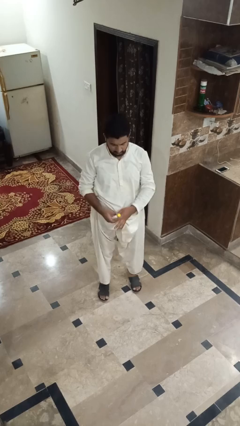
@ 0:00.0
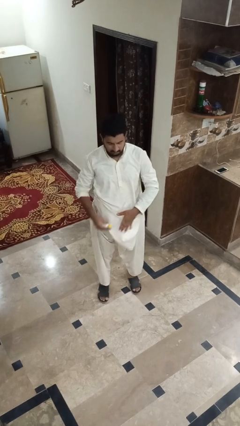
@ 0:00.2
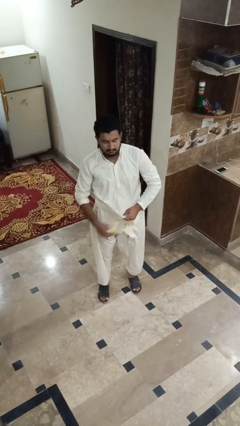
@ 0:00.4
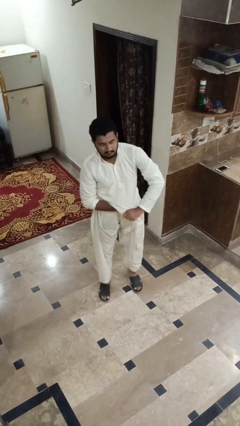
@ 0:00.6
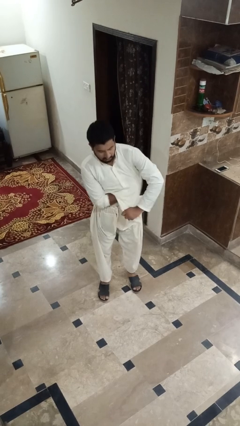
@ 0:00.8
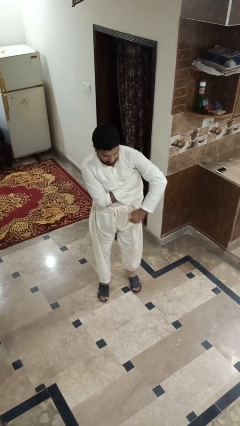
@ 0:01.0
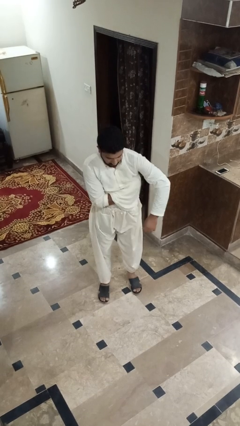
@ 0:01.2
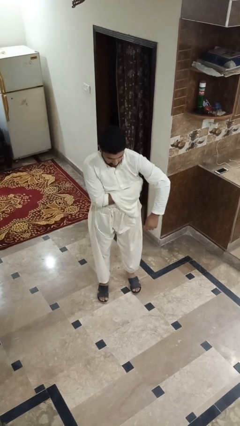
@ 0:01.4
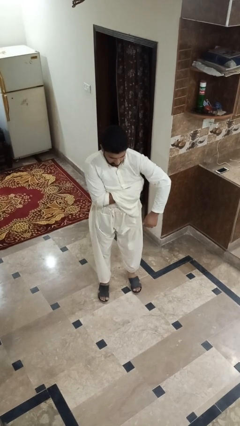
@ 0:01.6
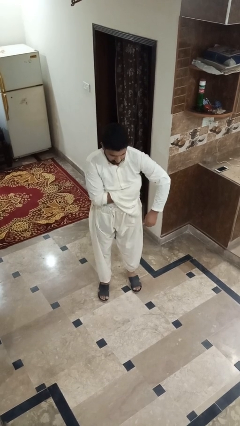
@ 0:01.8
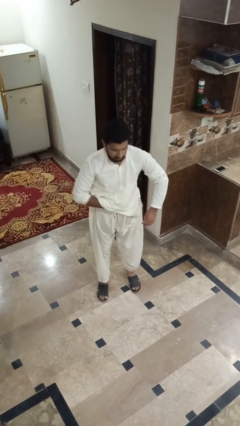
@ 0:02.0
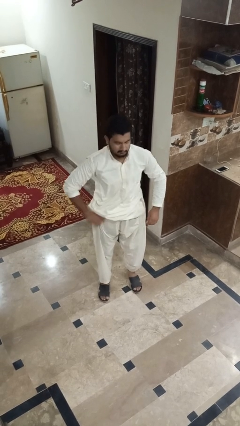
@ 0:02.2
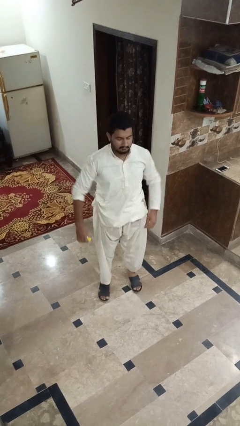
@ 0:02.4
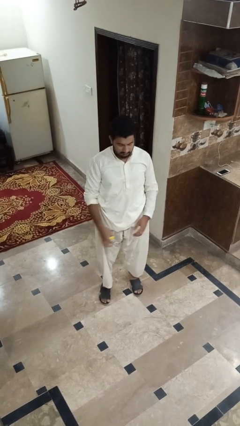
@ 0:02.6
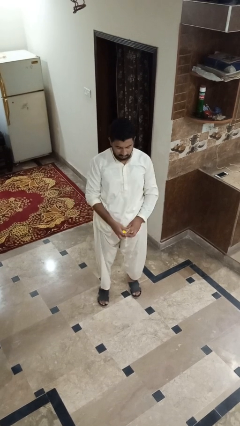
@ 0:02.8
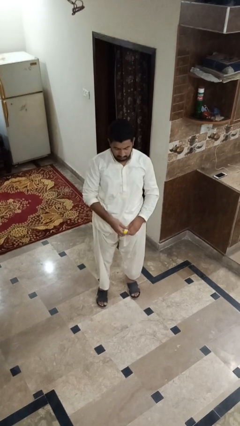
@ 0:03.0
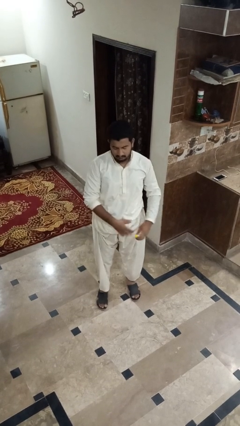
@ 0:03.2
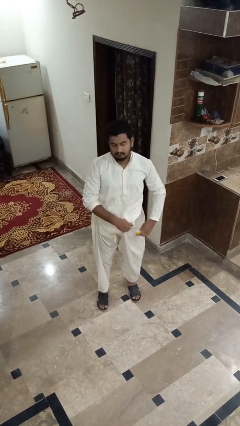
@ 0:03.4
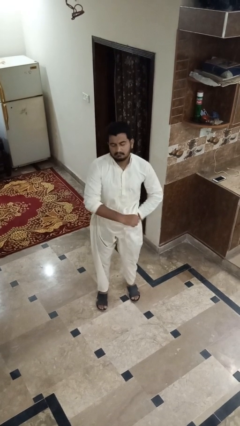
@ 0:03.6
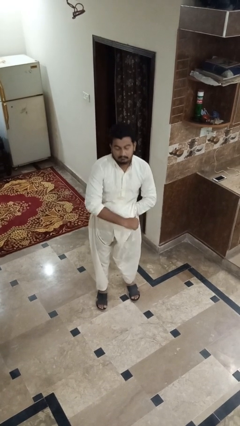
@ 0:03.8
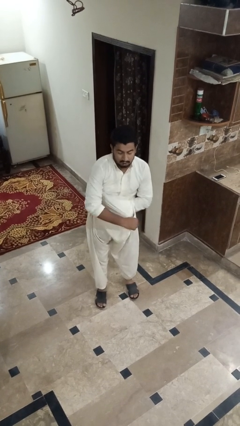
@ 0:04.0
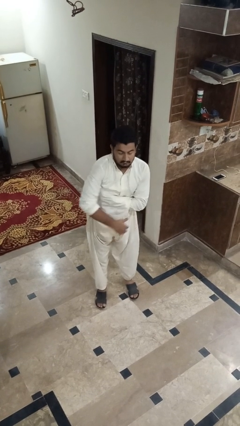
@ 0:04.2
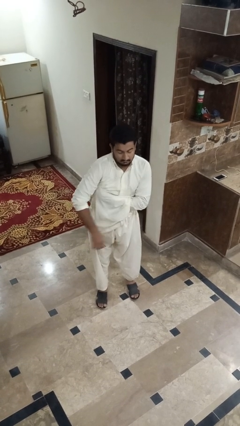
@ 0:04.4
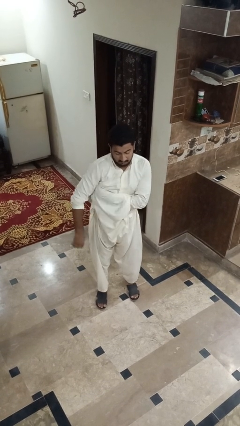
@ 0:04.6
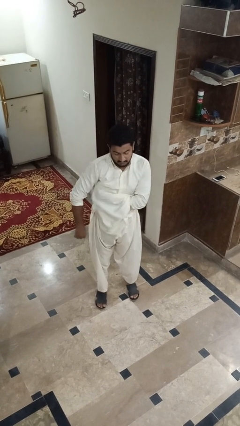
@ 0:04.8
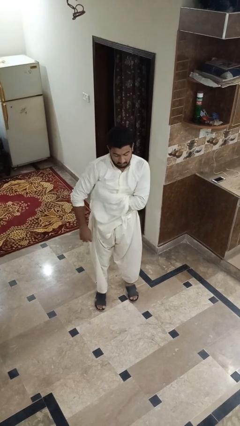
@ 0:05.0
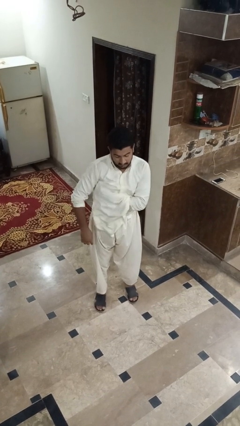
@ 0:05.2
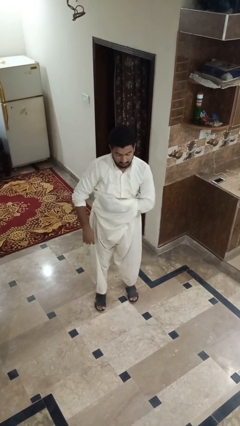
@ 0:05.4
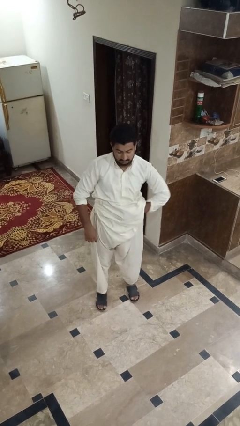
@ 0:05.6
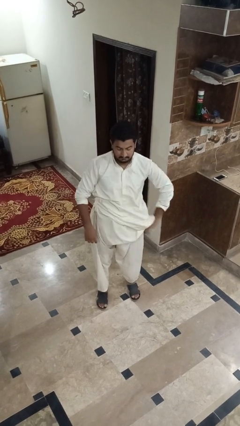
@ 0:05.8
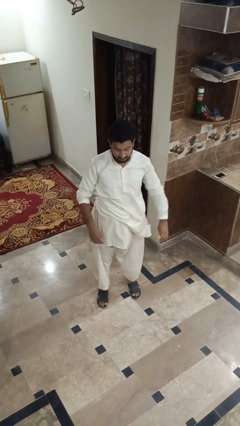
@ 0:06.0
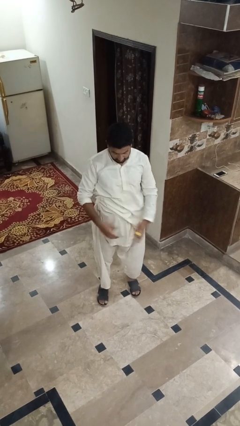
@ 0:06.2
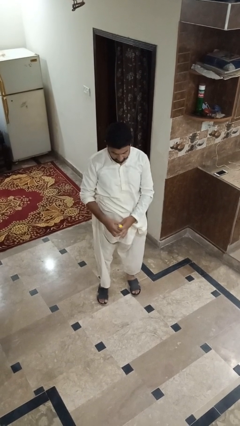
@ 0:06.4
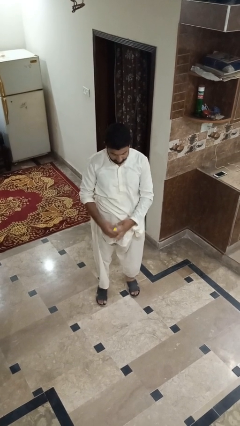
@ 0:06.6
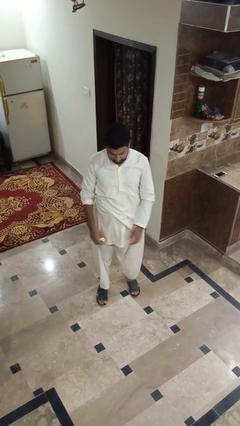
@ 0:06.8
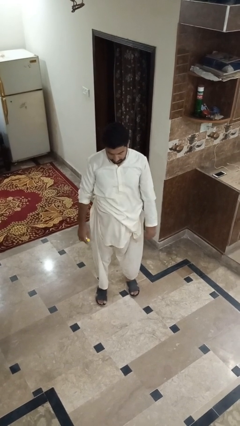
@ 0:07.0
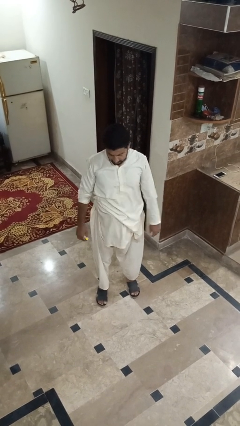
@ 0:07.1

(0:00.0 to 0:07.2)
person applies deodorant

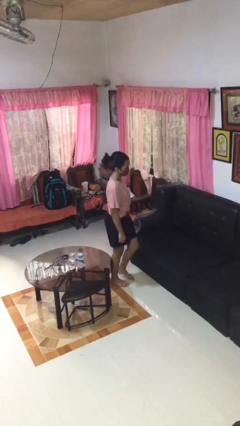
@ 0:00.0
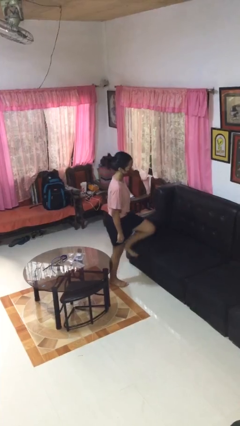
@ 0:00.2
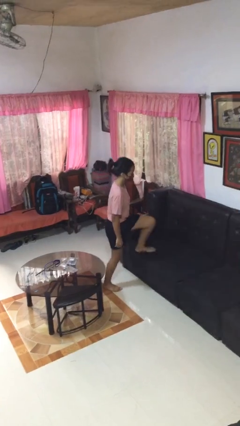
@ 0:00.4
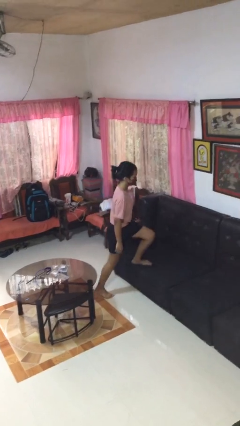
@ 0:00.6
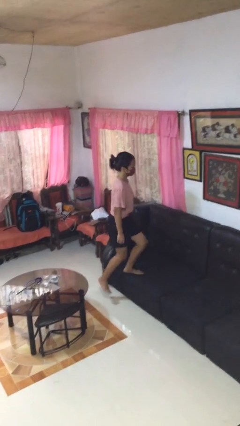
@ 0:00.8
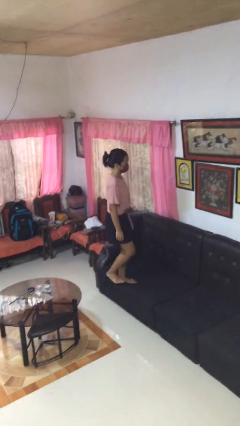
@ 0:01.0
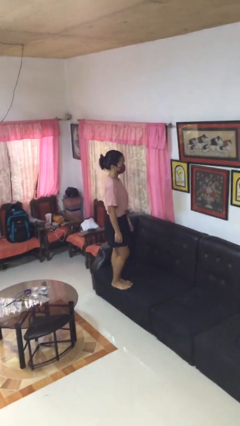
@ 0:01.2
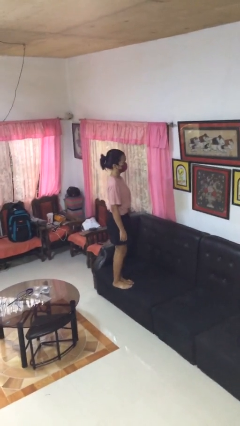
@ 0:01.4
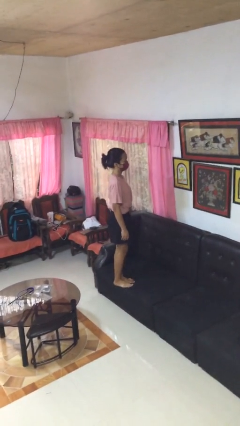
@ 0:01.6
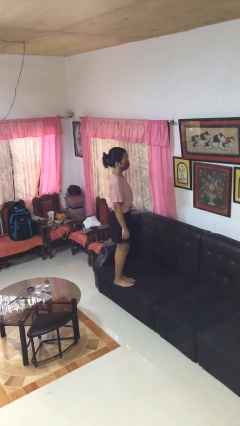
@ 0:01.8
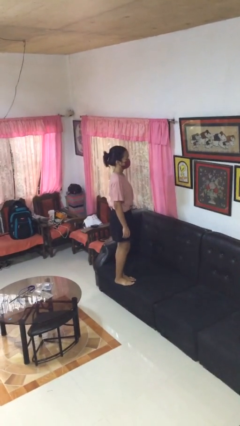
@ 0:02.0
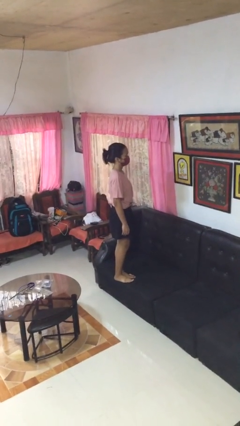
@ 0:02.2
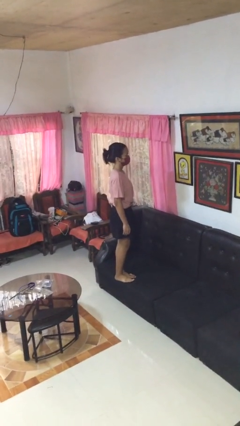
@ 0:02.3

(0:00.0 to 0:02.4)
person climbs on couch

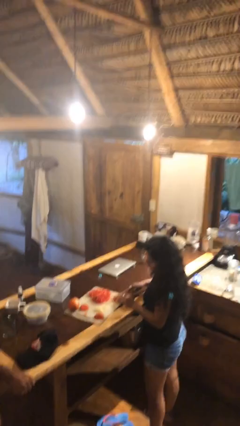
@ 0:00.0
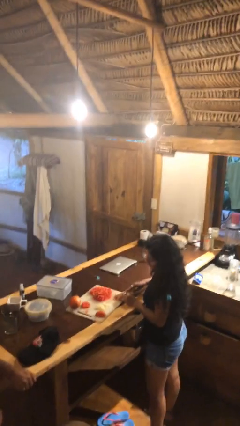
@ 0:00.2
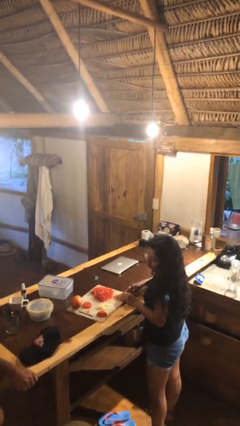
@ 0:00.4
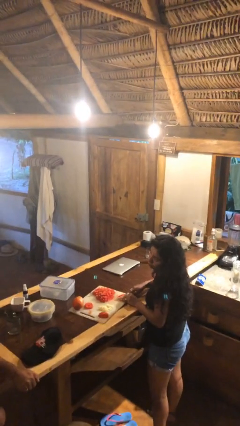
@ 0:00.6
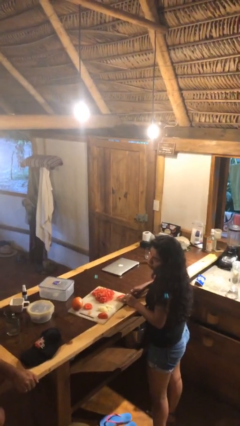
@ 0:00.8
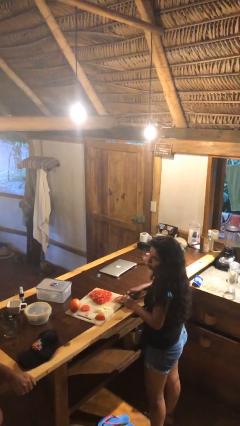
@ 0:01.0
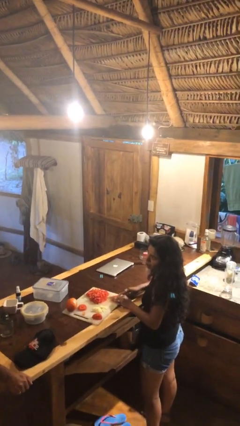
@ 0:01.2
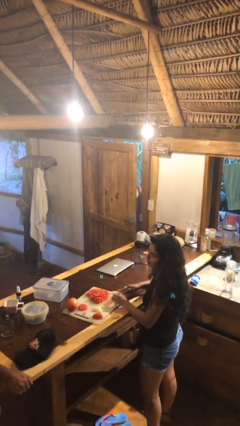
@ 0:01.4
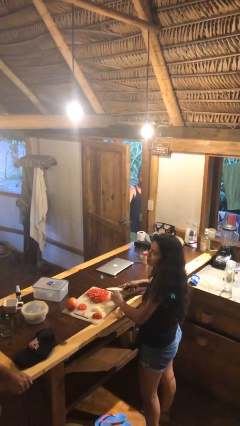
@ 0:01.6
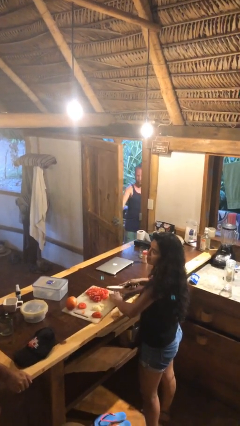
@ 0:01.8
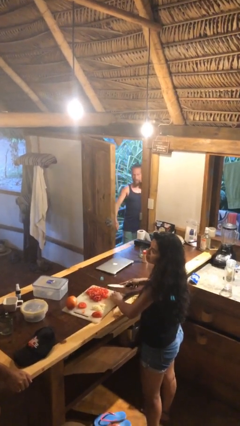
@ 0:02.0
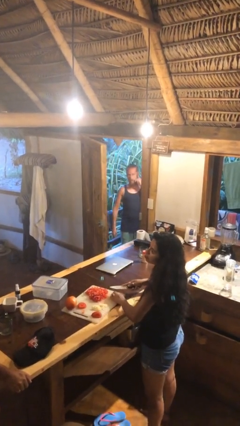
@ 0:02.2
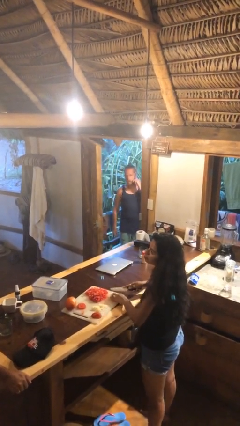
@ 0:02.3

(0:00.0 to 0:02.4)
person opens facility door

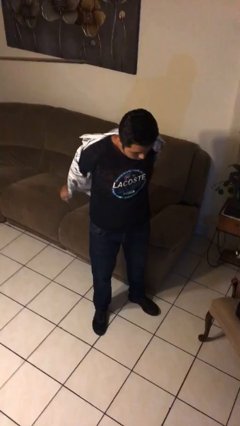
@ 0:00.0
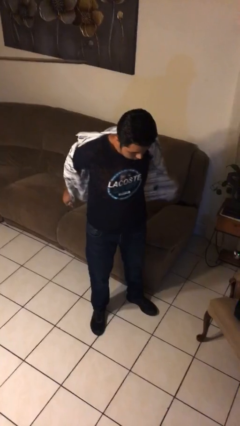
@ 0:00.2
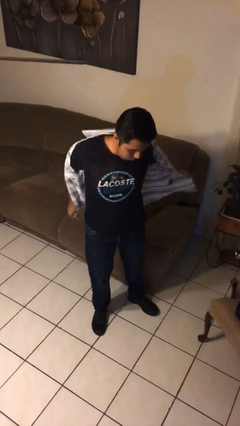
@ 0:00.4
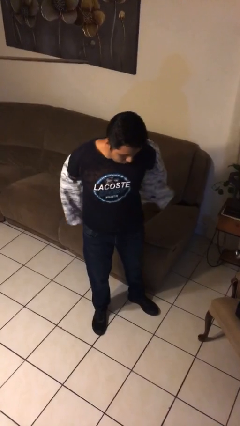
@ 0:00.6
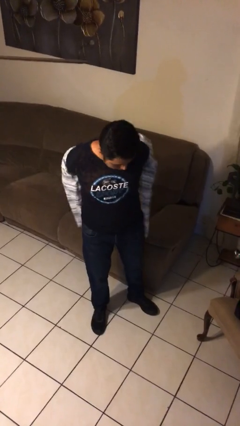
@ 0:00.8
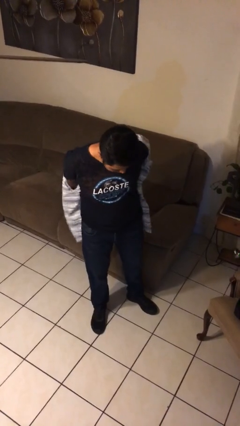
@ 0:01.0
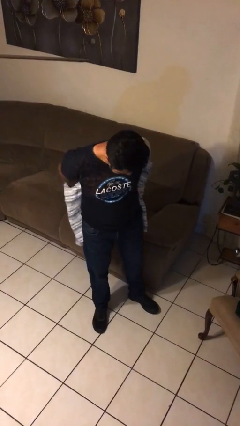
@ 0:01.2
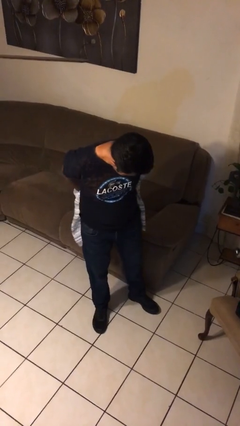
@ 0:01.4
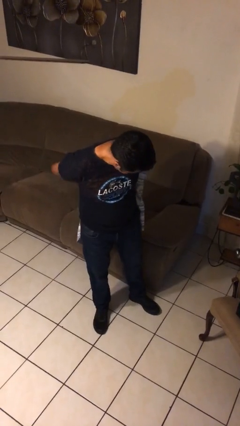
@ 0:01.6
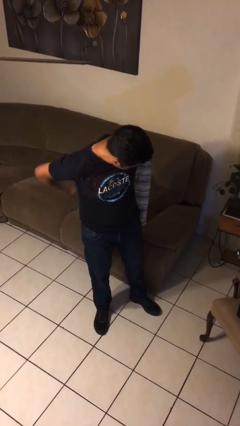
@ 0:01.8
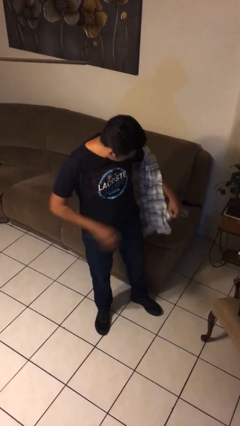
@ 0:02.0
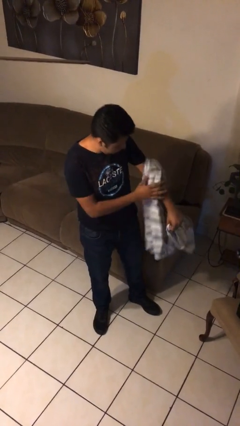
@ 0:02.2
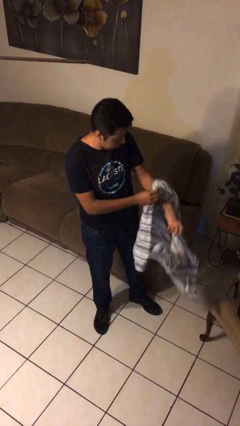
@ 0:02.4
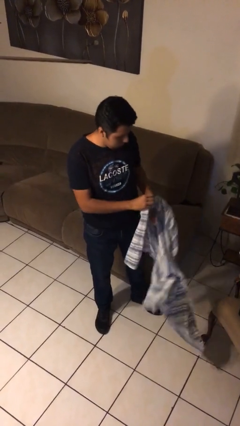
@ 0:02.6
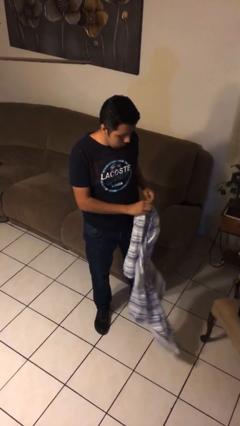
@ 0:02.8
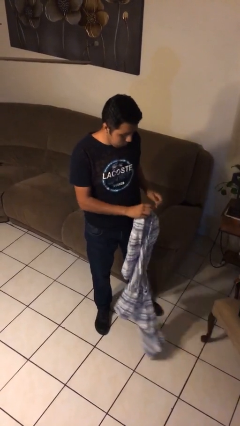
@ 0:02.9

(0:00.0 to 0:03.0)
person takes off shirt

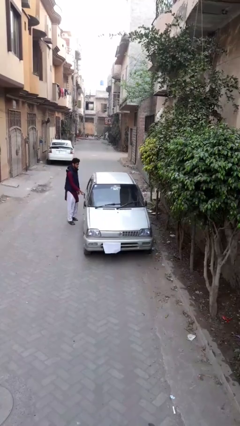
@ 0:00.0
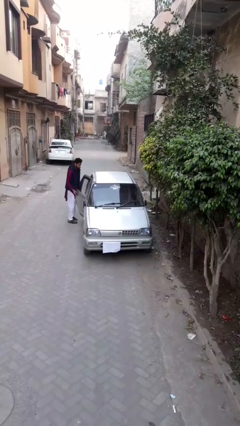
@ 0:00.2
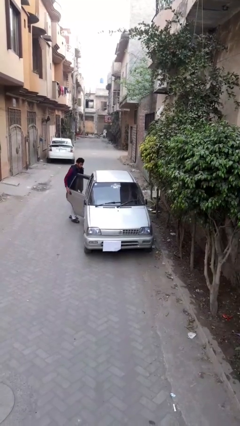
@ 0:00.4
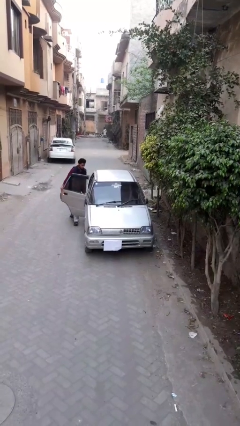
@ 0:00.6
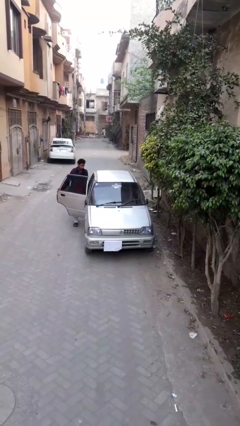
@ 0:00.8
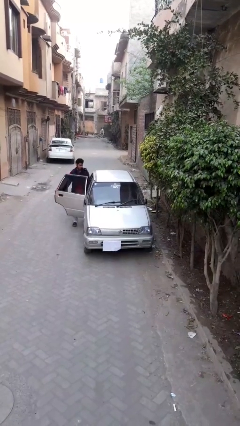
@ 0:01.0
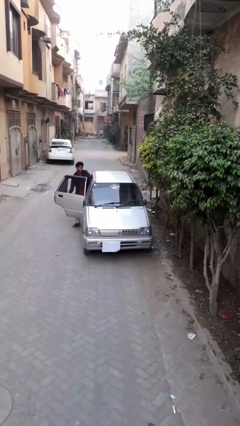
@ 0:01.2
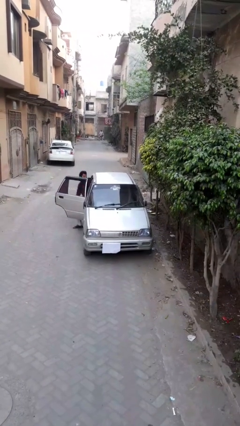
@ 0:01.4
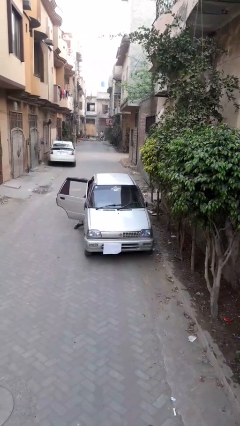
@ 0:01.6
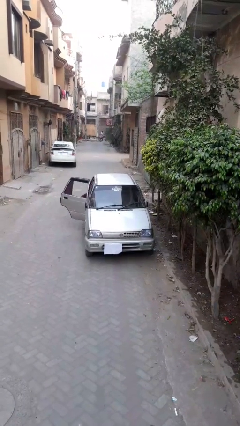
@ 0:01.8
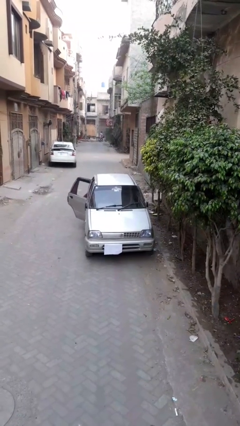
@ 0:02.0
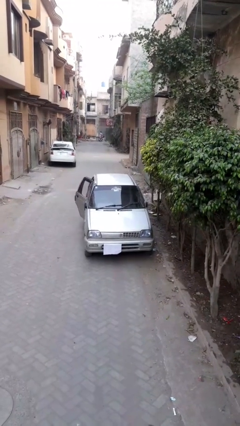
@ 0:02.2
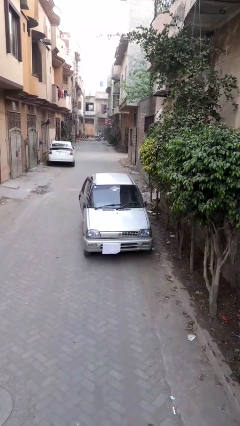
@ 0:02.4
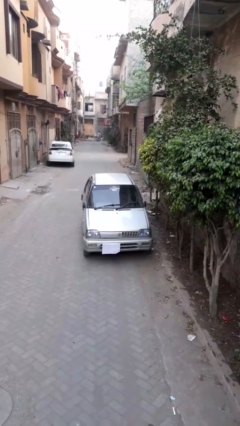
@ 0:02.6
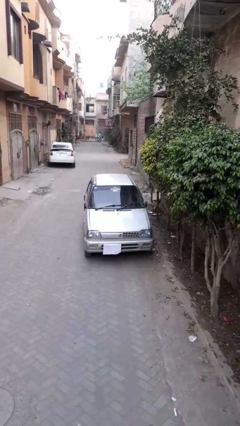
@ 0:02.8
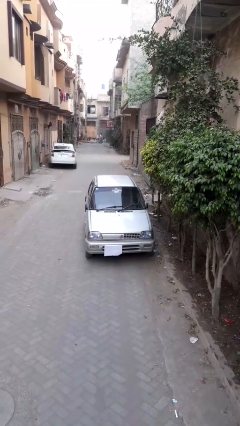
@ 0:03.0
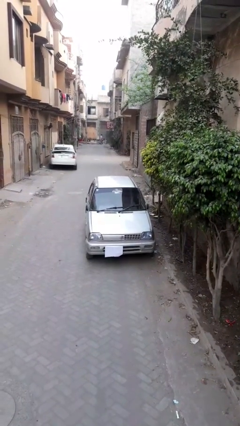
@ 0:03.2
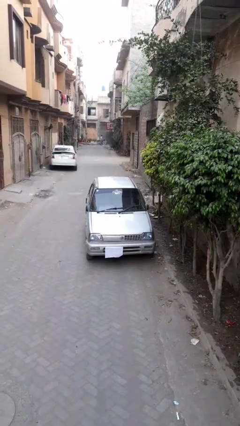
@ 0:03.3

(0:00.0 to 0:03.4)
car picks up person
